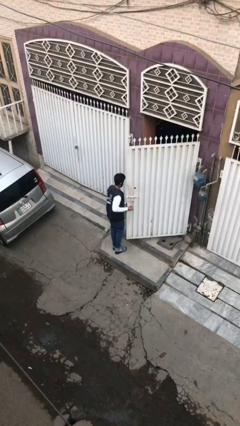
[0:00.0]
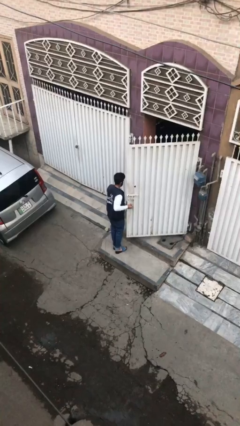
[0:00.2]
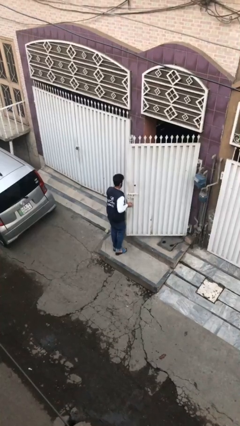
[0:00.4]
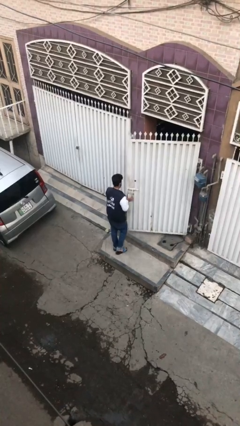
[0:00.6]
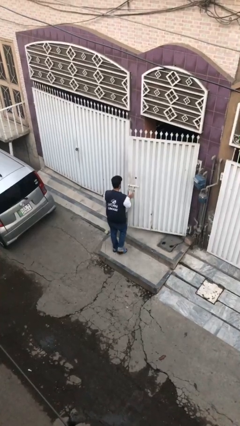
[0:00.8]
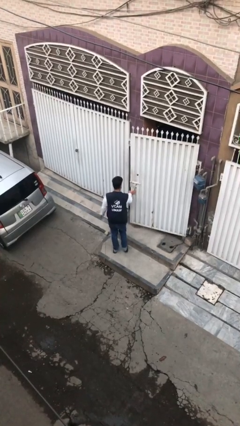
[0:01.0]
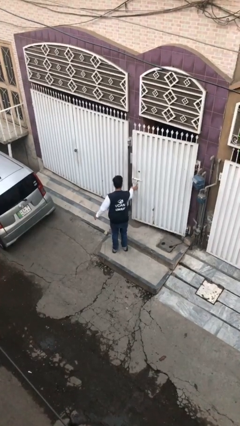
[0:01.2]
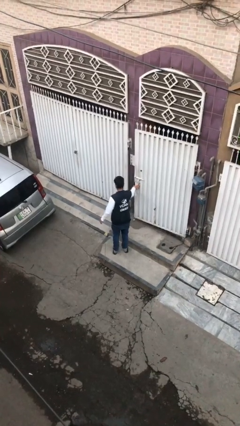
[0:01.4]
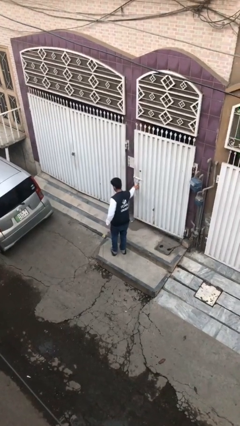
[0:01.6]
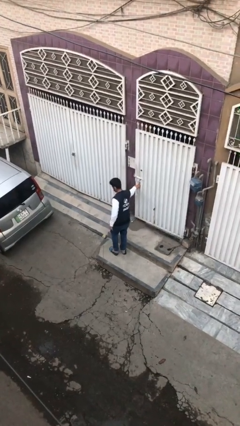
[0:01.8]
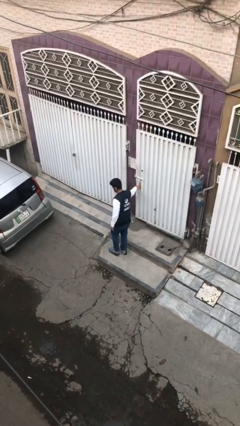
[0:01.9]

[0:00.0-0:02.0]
person closes facility door

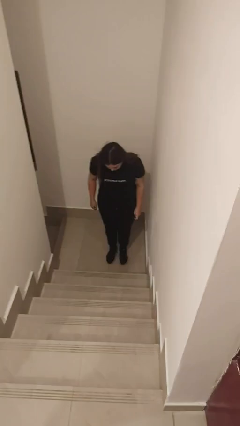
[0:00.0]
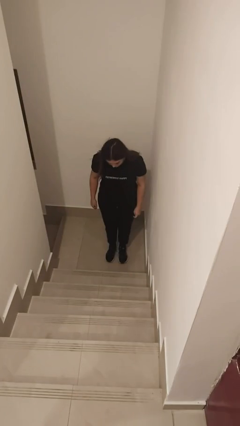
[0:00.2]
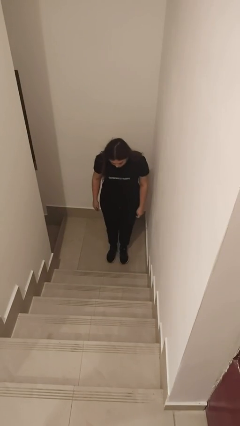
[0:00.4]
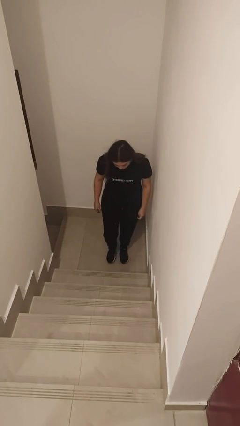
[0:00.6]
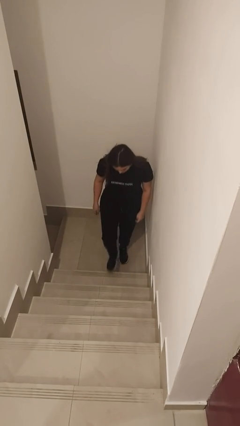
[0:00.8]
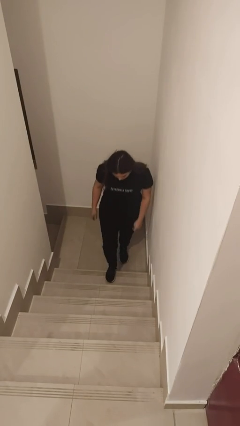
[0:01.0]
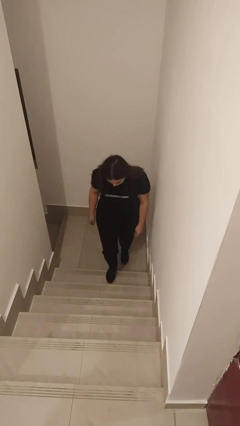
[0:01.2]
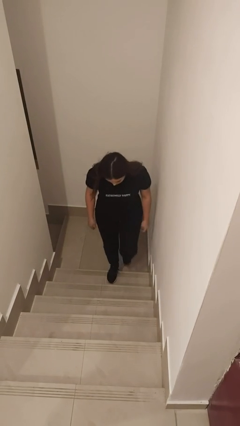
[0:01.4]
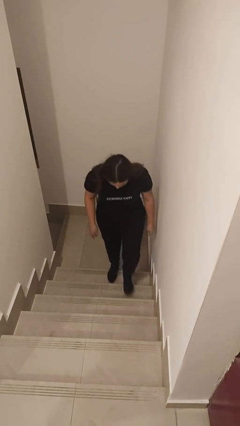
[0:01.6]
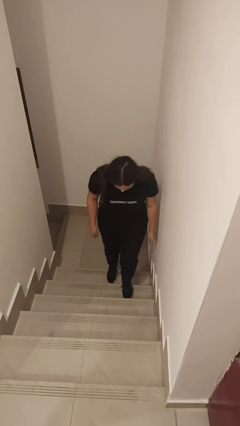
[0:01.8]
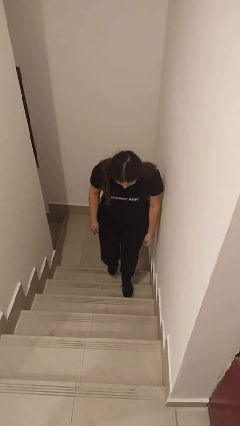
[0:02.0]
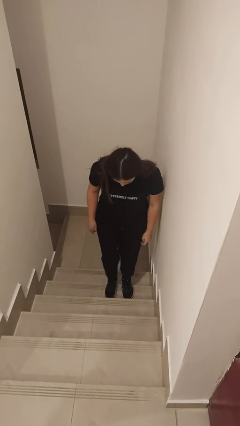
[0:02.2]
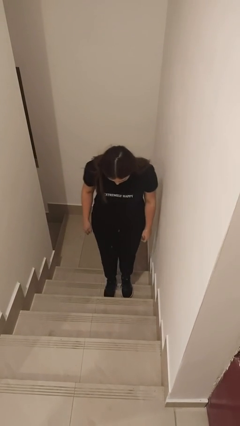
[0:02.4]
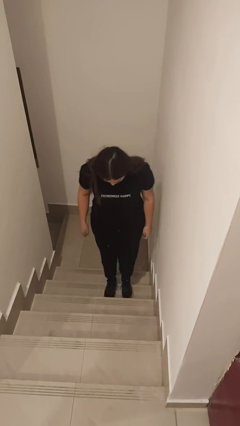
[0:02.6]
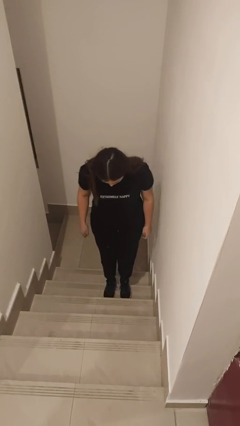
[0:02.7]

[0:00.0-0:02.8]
person climbs up stairs

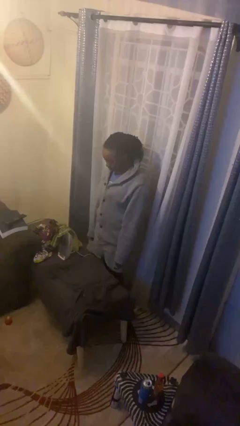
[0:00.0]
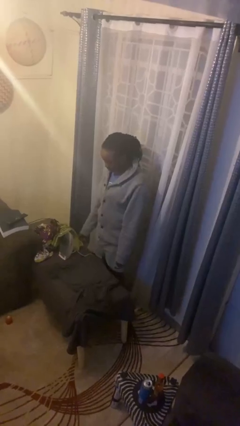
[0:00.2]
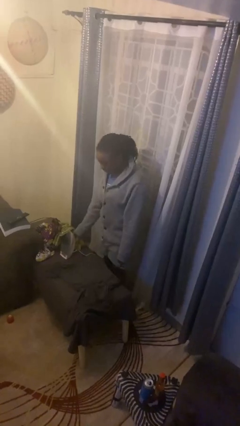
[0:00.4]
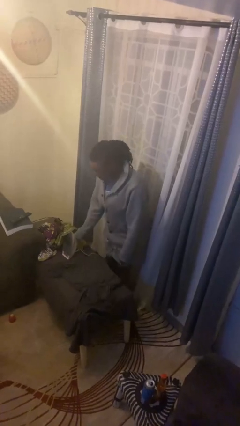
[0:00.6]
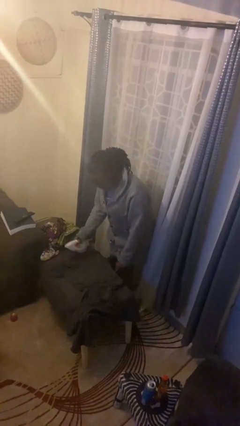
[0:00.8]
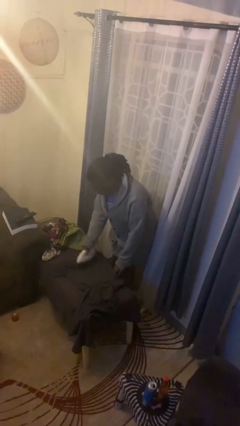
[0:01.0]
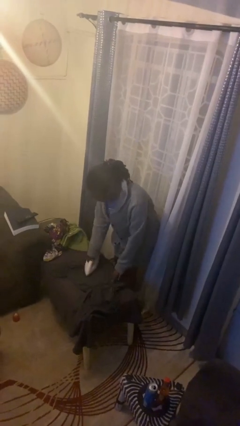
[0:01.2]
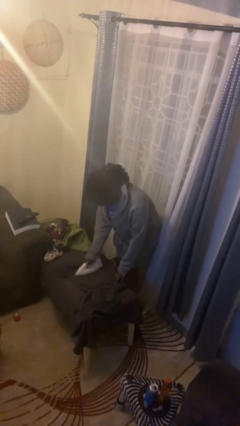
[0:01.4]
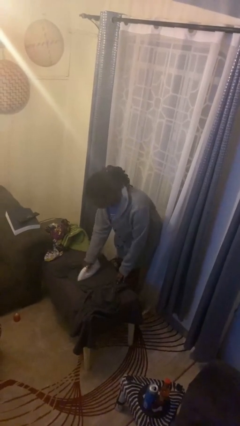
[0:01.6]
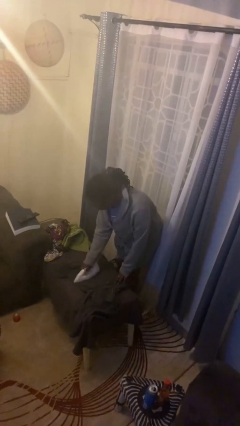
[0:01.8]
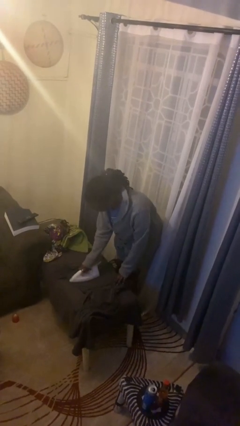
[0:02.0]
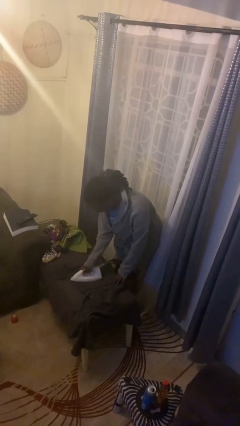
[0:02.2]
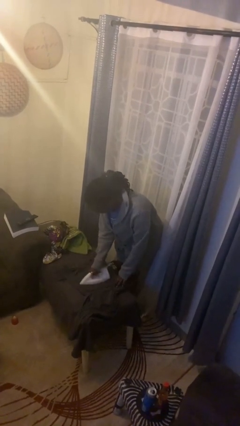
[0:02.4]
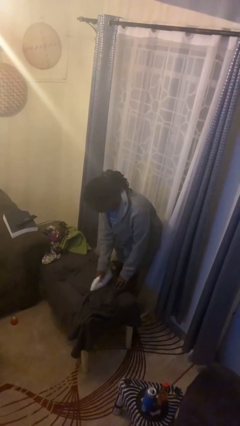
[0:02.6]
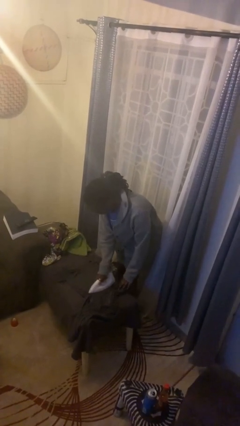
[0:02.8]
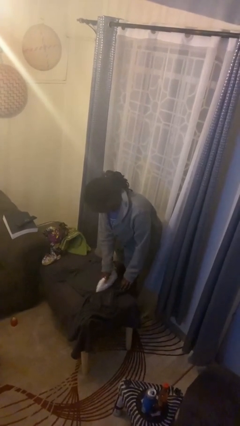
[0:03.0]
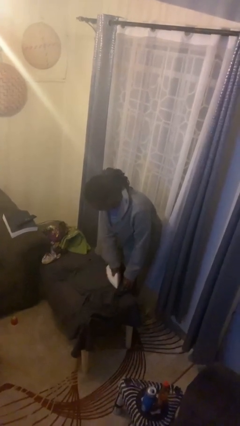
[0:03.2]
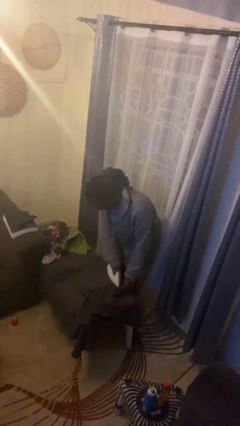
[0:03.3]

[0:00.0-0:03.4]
person irons clothes

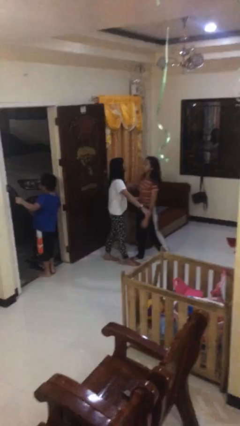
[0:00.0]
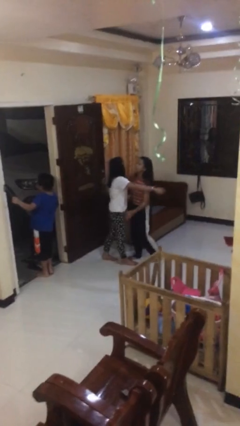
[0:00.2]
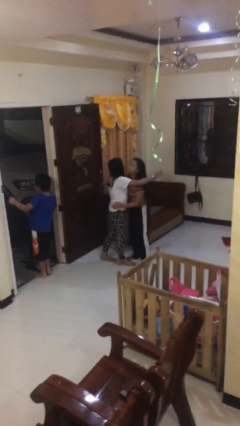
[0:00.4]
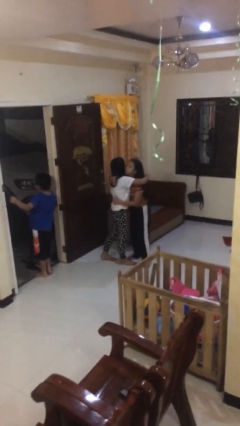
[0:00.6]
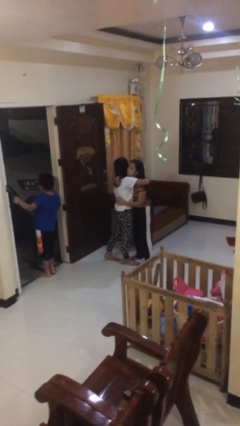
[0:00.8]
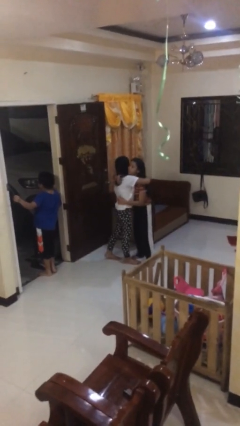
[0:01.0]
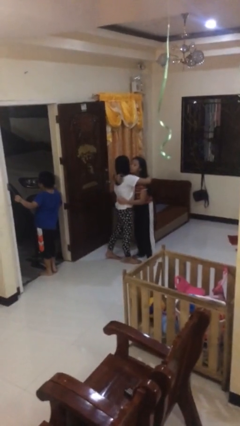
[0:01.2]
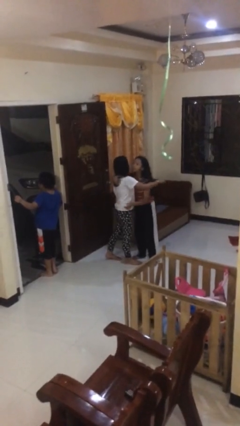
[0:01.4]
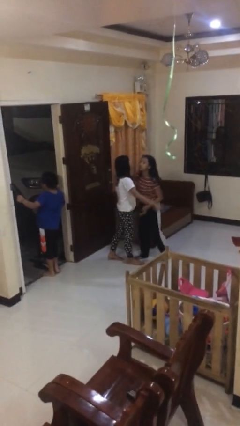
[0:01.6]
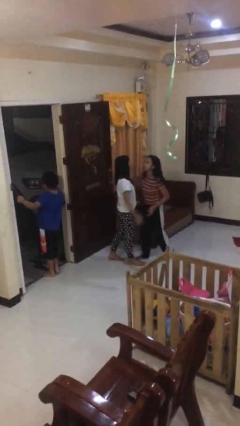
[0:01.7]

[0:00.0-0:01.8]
person embraces person

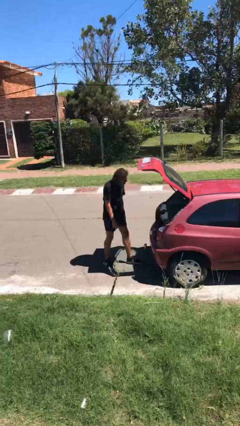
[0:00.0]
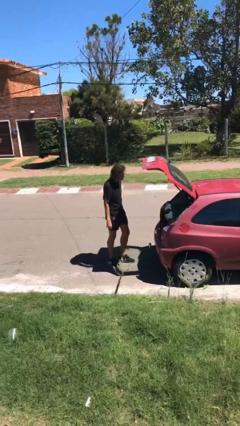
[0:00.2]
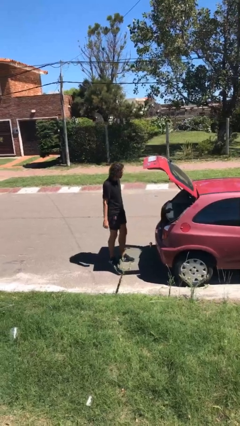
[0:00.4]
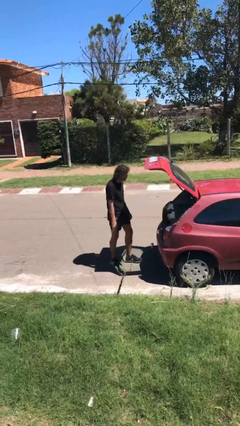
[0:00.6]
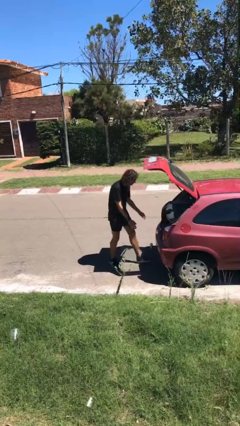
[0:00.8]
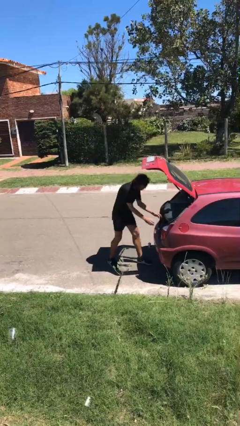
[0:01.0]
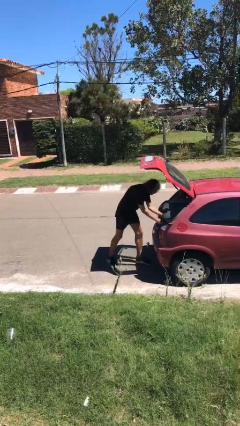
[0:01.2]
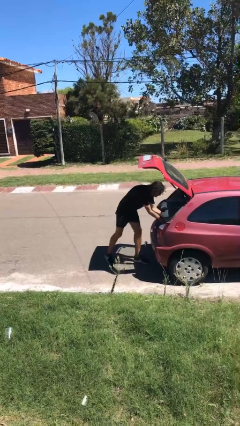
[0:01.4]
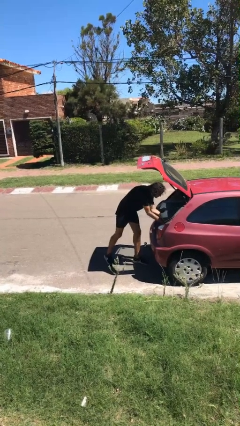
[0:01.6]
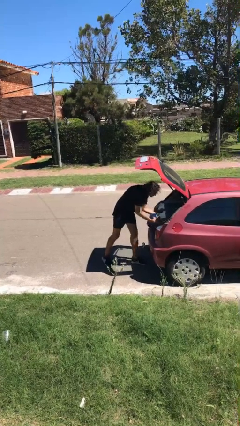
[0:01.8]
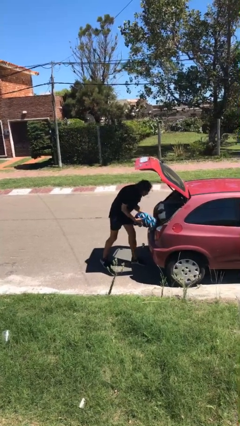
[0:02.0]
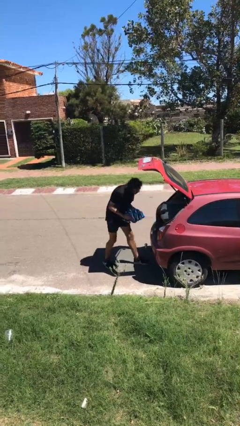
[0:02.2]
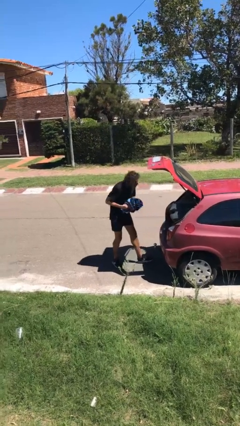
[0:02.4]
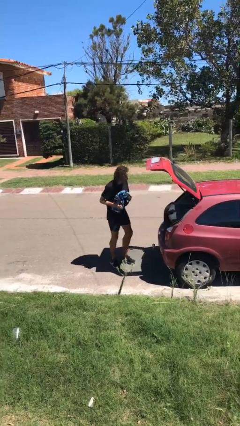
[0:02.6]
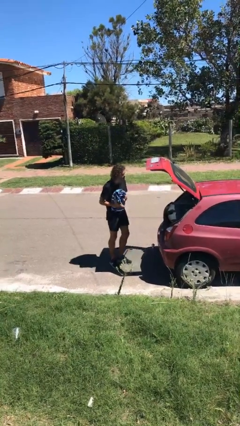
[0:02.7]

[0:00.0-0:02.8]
person unloads car

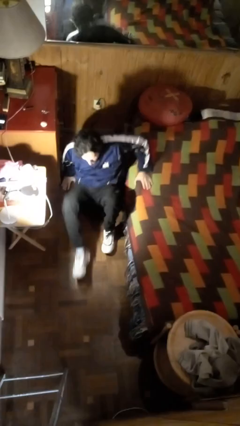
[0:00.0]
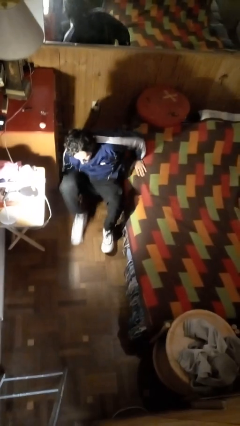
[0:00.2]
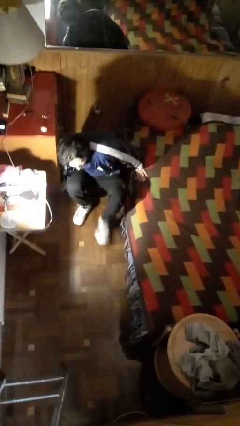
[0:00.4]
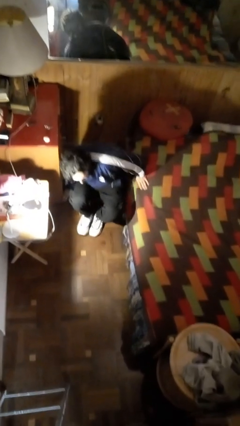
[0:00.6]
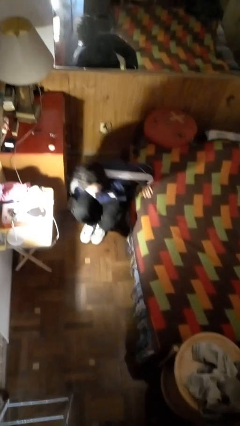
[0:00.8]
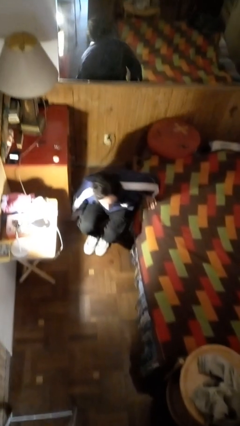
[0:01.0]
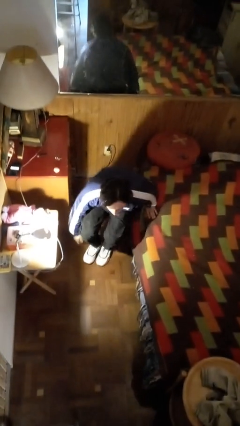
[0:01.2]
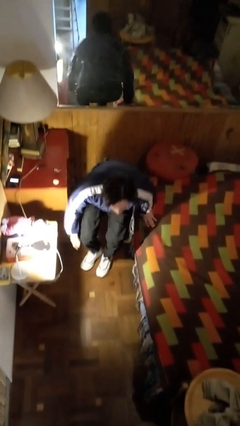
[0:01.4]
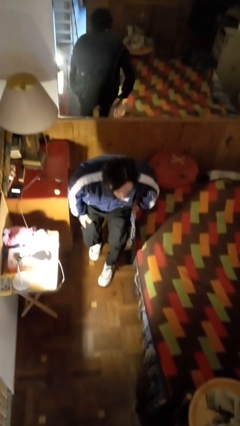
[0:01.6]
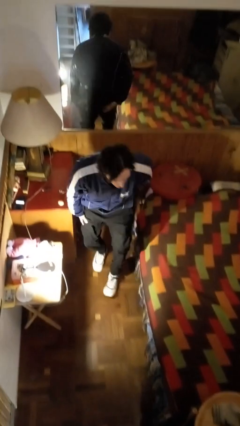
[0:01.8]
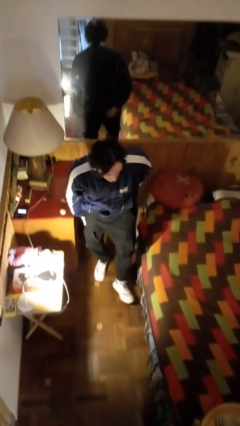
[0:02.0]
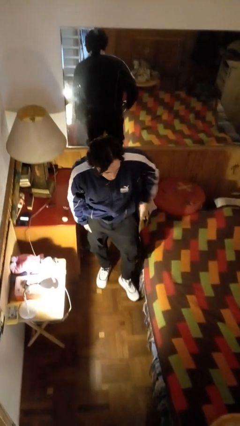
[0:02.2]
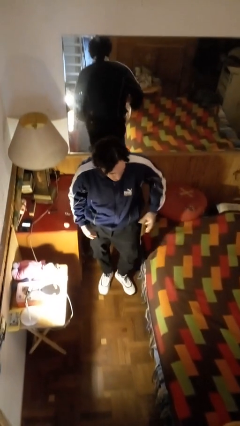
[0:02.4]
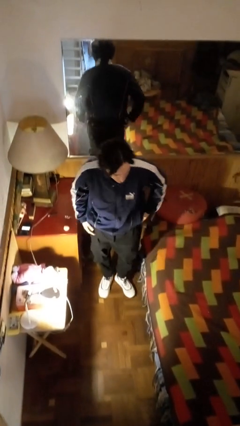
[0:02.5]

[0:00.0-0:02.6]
person stands up from floor

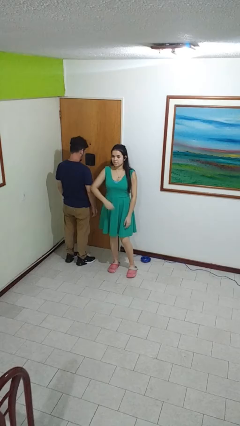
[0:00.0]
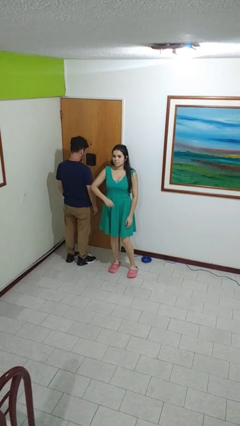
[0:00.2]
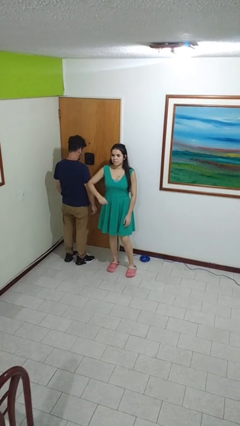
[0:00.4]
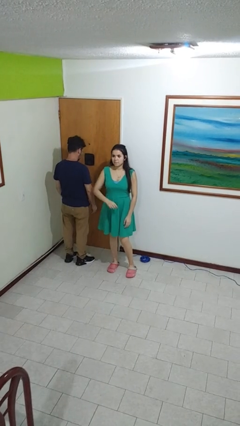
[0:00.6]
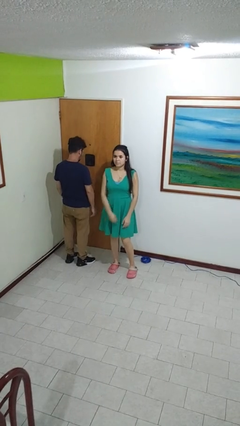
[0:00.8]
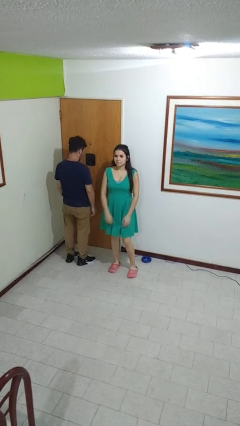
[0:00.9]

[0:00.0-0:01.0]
person nudges person with elbow
